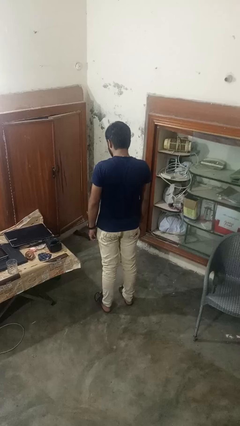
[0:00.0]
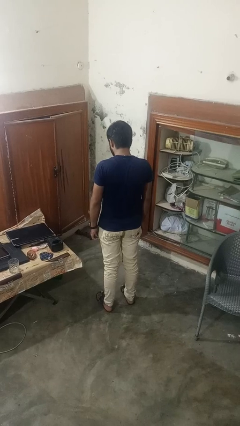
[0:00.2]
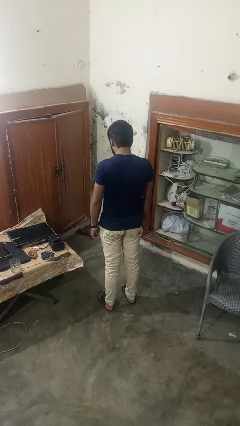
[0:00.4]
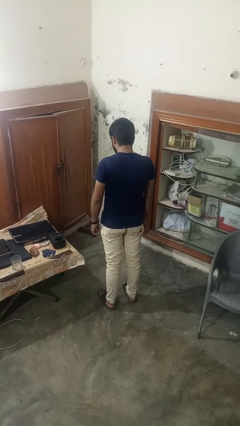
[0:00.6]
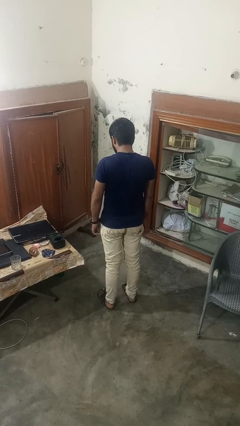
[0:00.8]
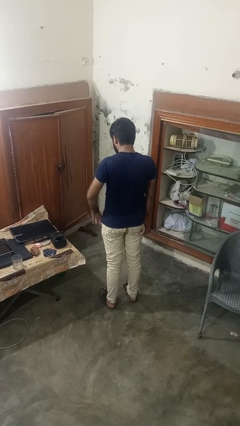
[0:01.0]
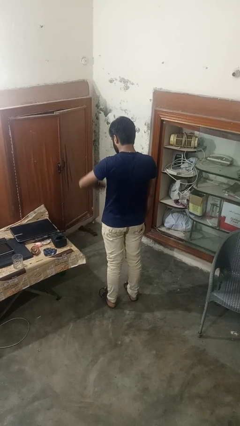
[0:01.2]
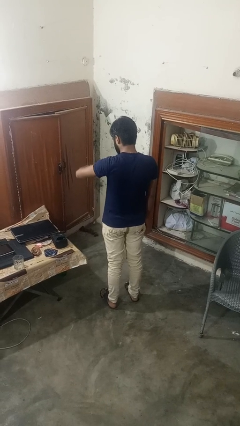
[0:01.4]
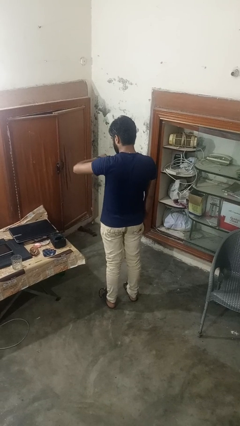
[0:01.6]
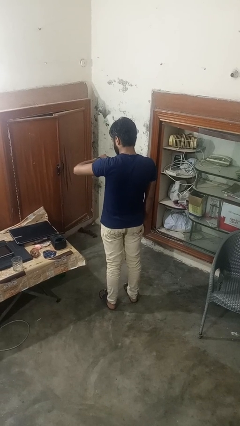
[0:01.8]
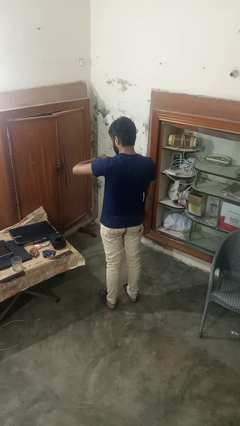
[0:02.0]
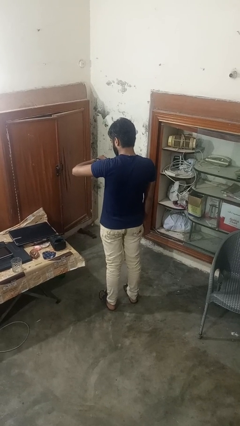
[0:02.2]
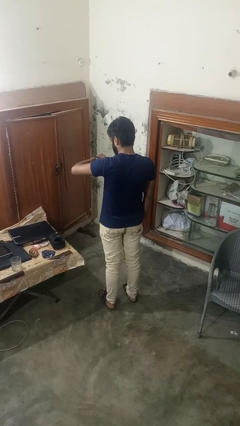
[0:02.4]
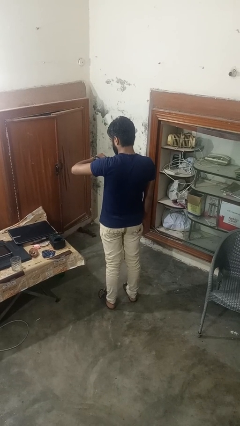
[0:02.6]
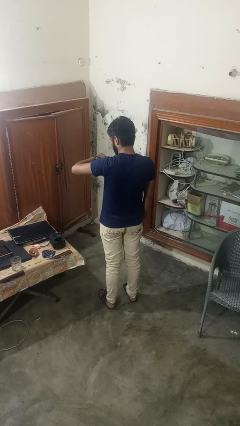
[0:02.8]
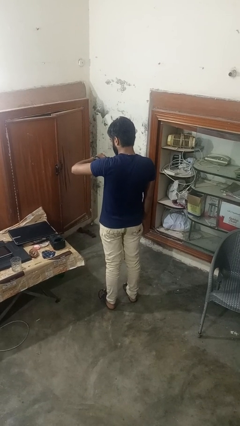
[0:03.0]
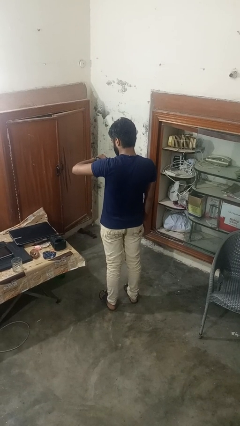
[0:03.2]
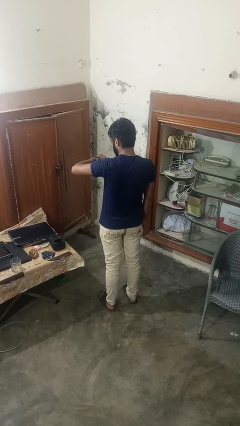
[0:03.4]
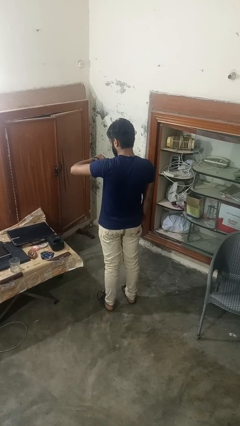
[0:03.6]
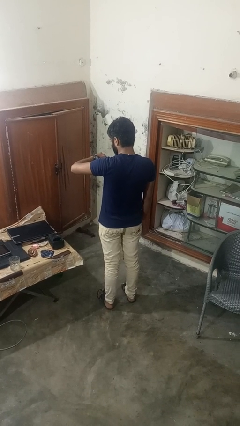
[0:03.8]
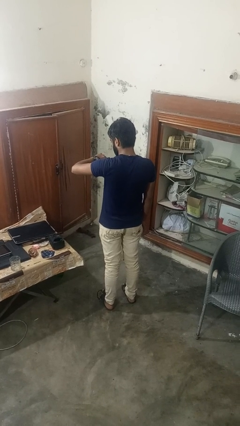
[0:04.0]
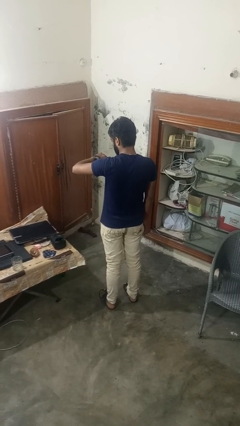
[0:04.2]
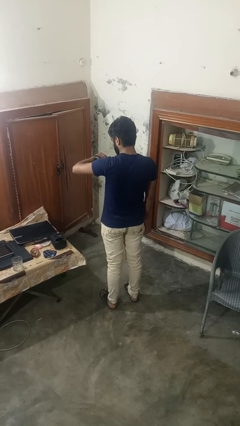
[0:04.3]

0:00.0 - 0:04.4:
person looks at wristwatch

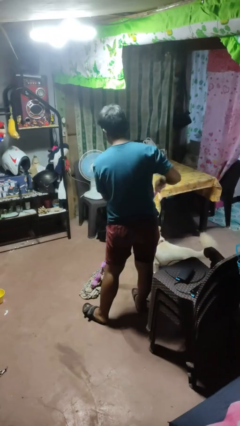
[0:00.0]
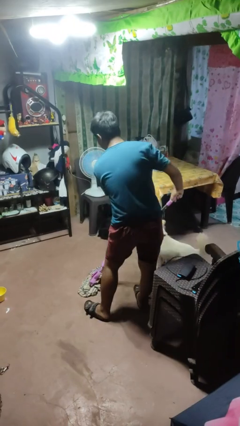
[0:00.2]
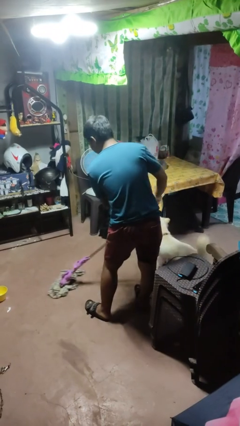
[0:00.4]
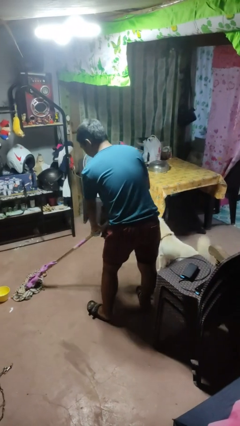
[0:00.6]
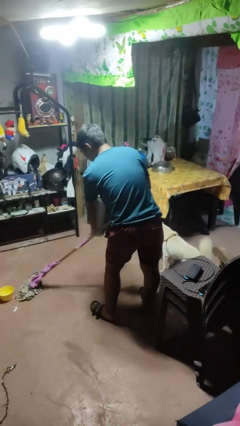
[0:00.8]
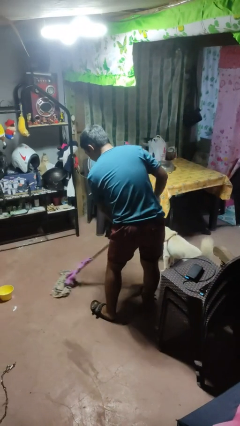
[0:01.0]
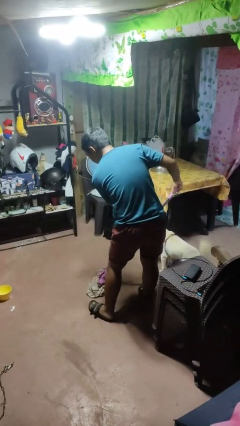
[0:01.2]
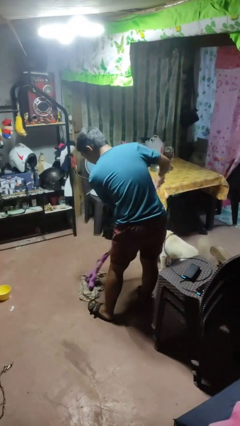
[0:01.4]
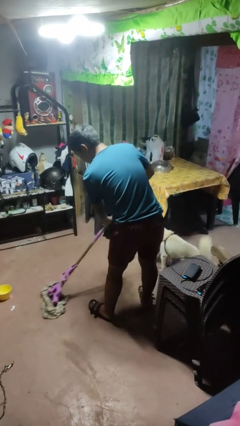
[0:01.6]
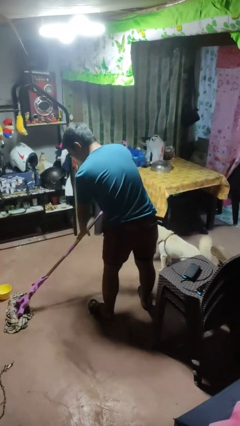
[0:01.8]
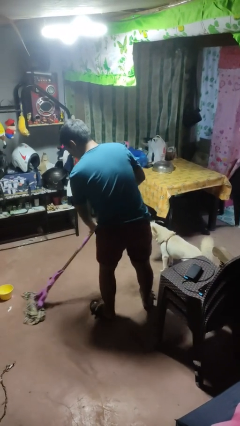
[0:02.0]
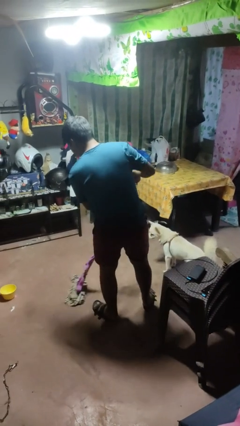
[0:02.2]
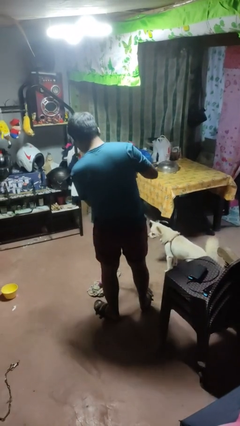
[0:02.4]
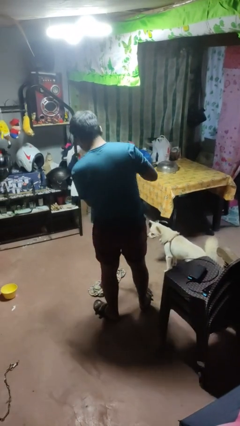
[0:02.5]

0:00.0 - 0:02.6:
person mops

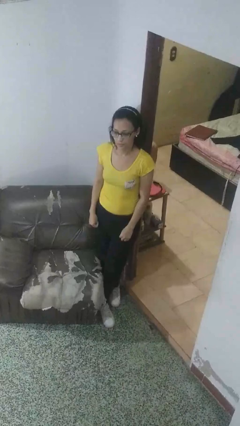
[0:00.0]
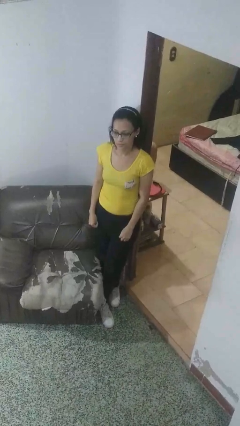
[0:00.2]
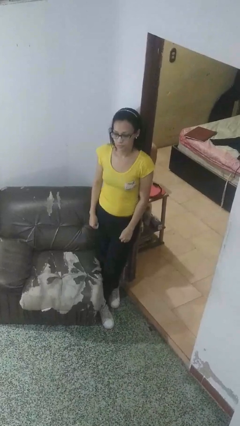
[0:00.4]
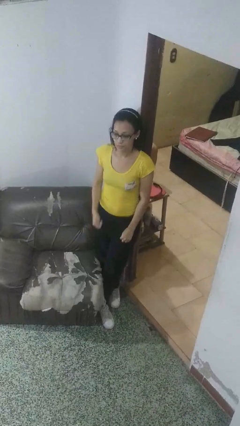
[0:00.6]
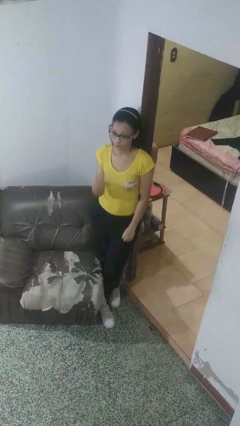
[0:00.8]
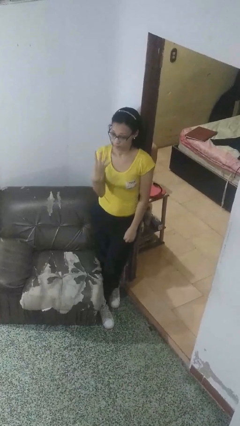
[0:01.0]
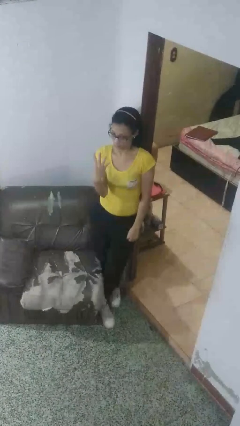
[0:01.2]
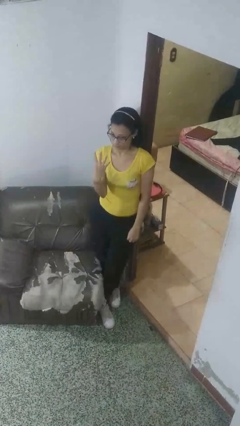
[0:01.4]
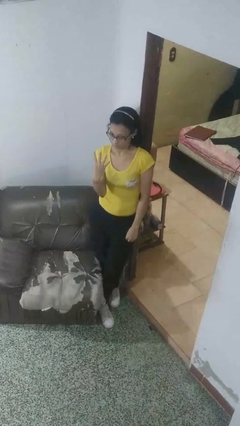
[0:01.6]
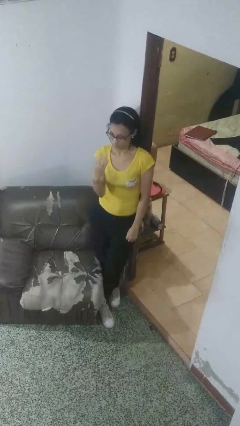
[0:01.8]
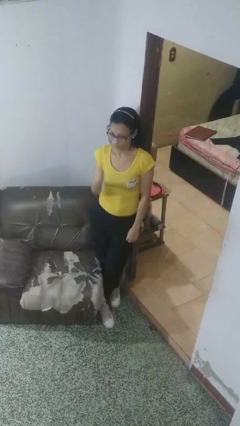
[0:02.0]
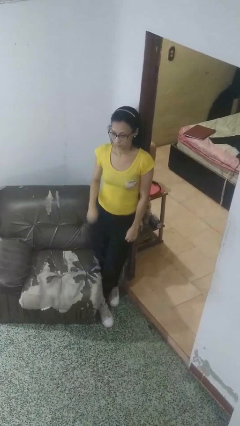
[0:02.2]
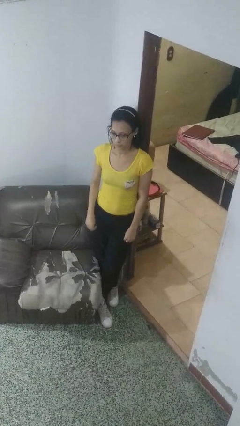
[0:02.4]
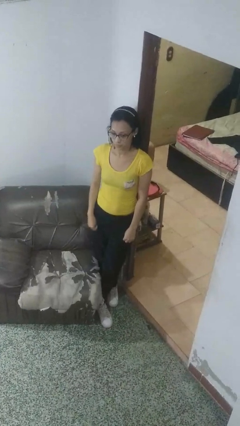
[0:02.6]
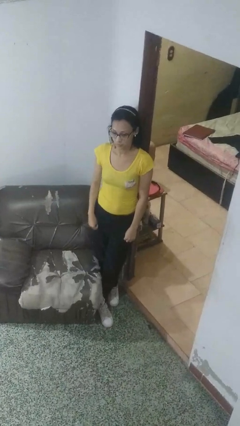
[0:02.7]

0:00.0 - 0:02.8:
person gestures number four

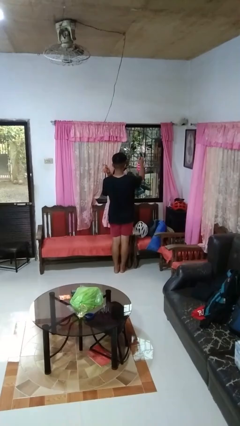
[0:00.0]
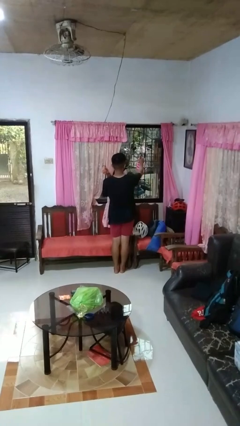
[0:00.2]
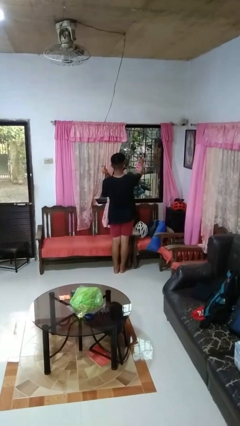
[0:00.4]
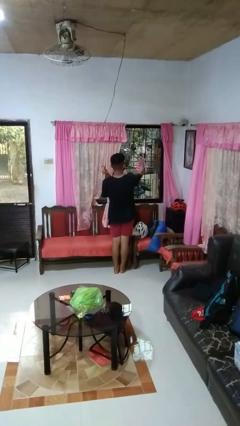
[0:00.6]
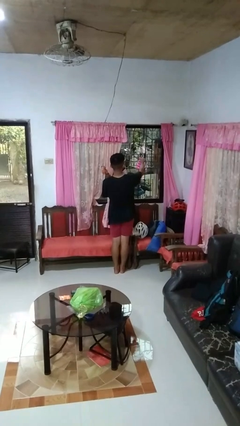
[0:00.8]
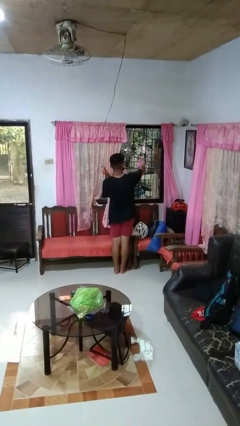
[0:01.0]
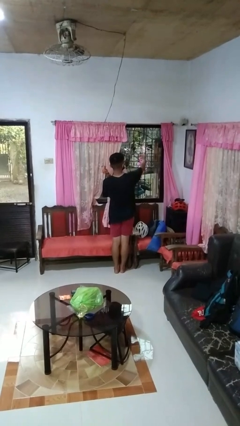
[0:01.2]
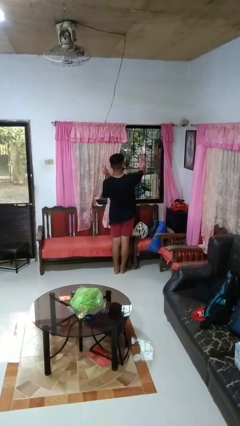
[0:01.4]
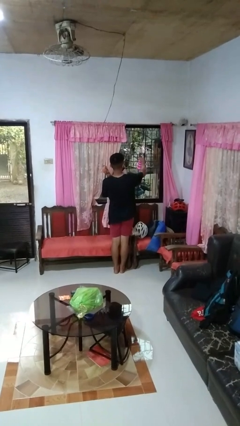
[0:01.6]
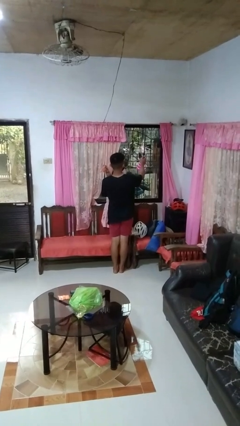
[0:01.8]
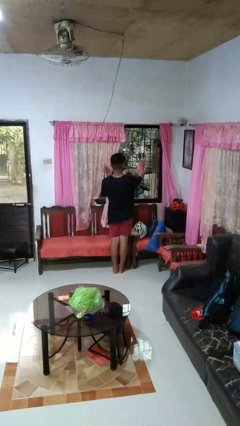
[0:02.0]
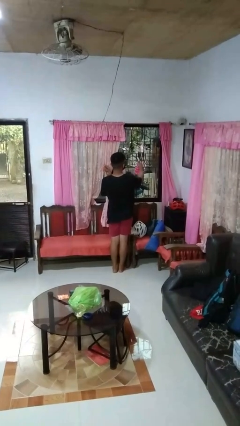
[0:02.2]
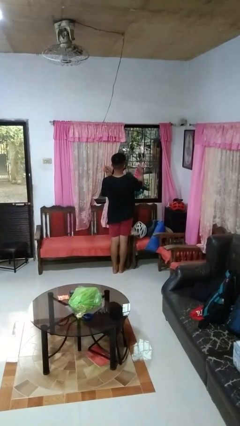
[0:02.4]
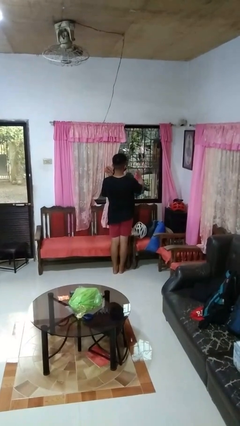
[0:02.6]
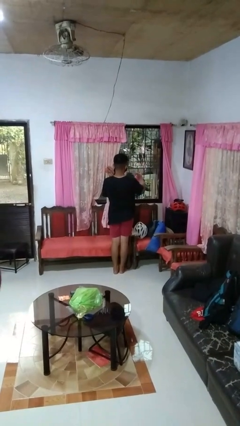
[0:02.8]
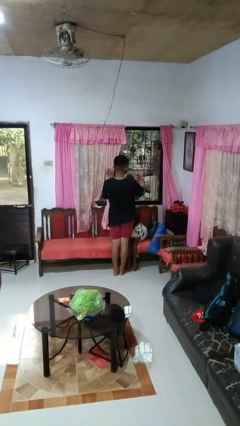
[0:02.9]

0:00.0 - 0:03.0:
person sprays from bottle

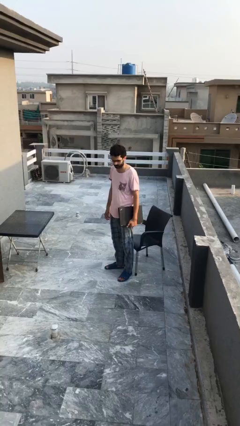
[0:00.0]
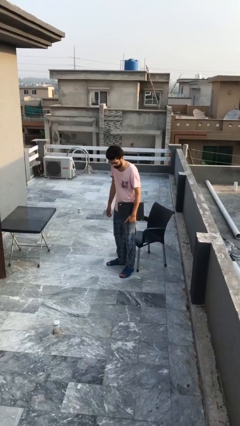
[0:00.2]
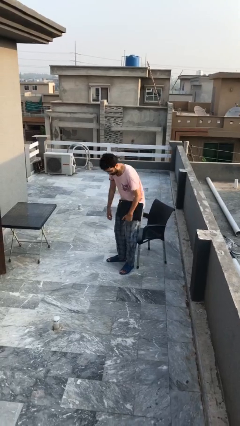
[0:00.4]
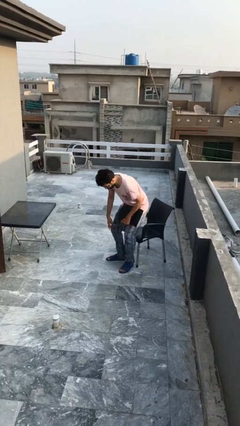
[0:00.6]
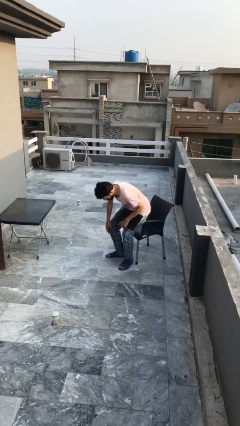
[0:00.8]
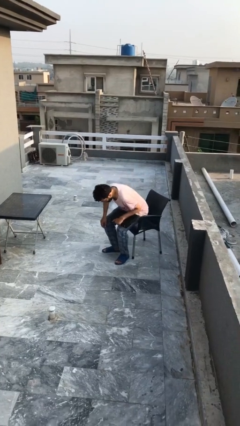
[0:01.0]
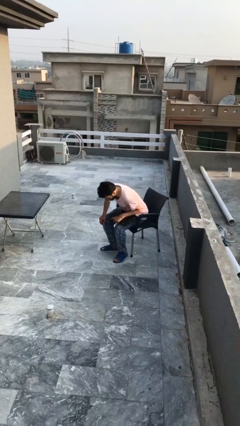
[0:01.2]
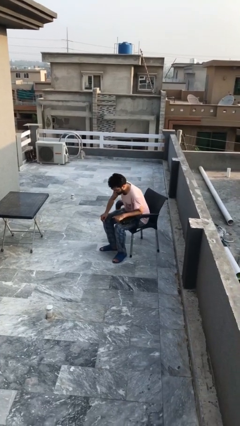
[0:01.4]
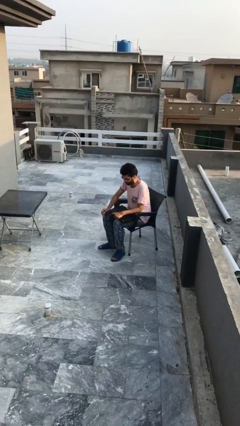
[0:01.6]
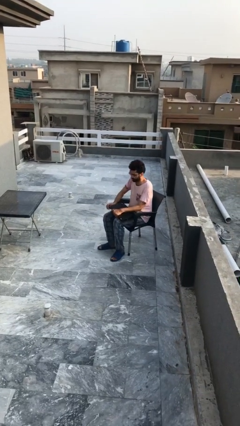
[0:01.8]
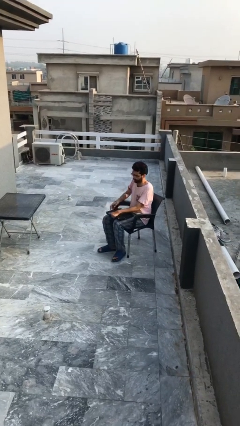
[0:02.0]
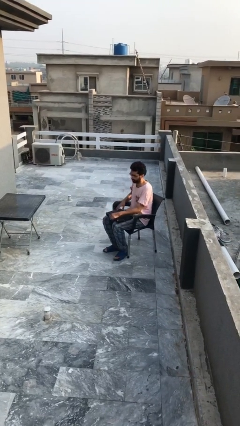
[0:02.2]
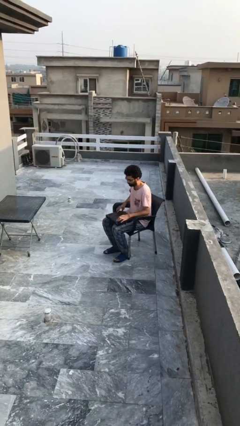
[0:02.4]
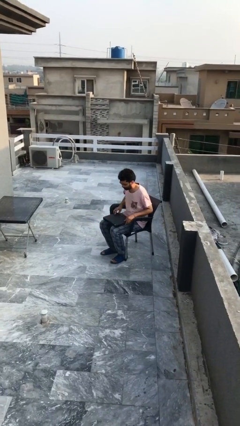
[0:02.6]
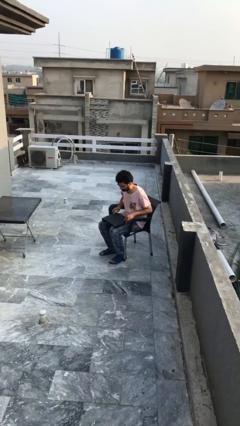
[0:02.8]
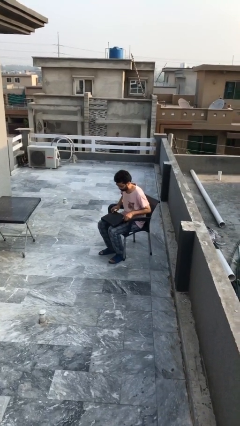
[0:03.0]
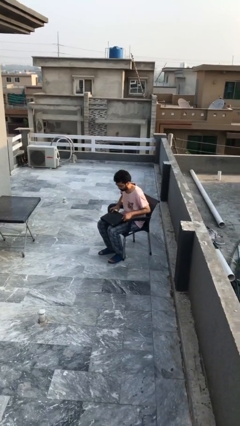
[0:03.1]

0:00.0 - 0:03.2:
person sits down

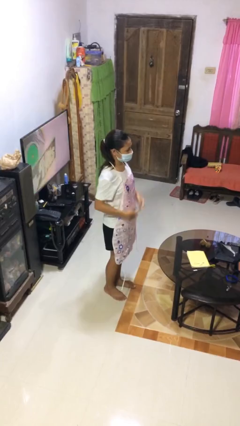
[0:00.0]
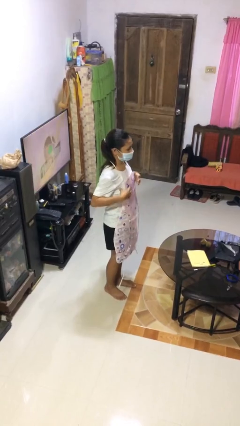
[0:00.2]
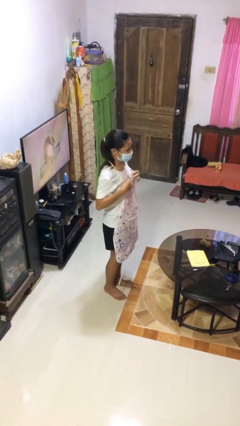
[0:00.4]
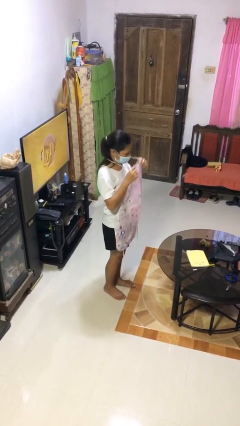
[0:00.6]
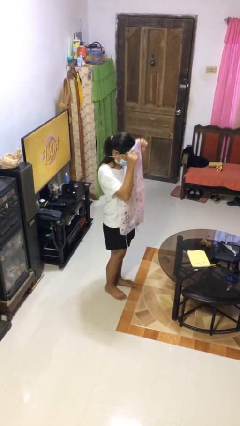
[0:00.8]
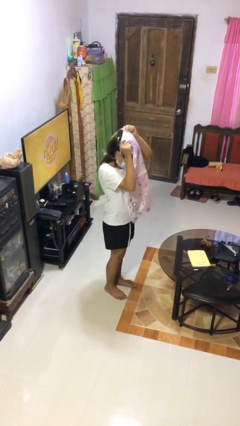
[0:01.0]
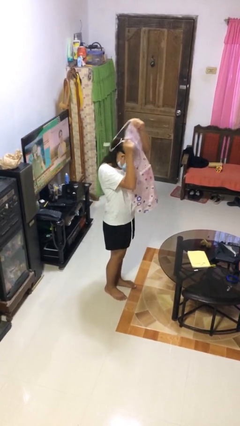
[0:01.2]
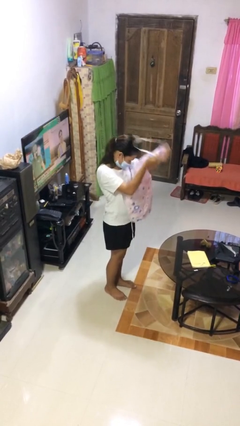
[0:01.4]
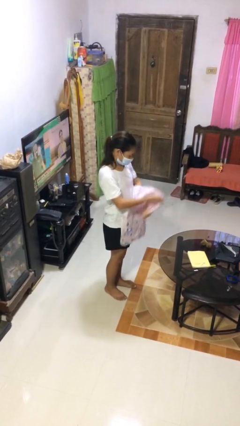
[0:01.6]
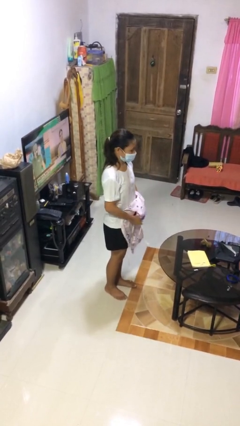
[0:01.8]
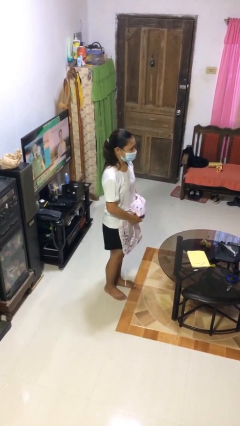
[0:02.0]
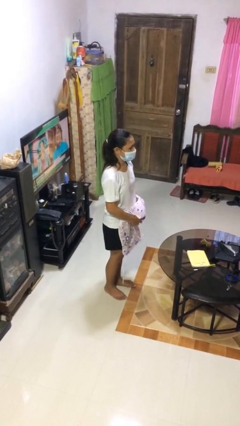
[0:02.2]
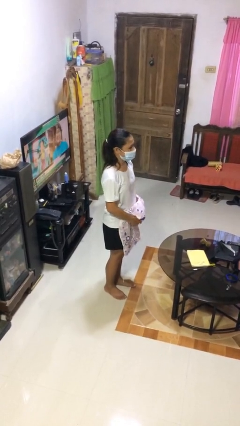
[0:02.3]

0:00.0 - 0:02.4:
person takes off apron
